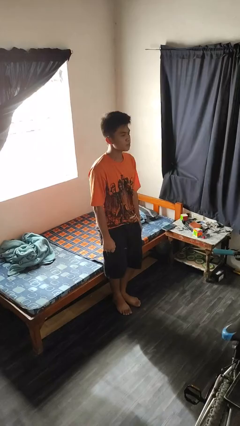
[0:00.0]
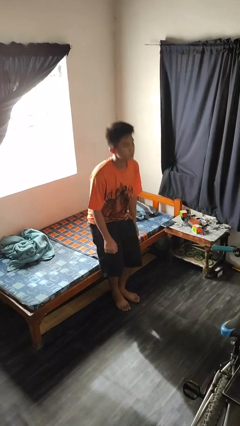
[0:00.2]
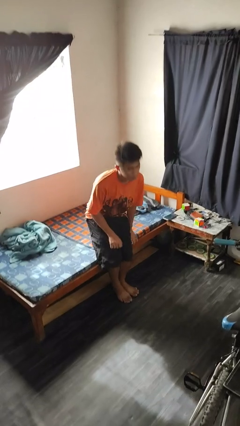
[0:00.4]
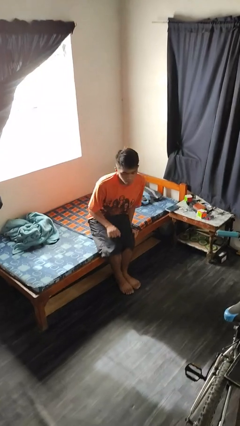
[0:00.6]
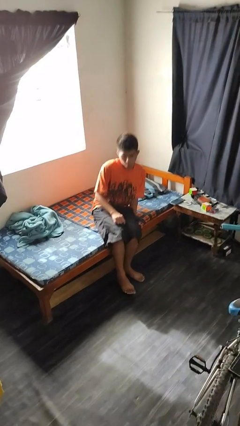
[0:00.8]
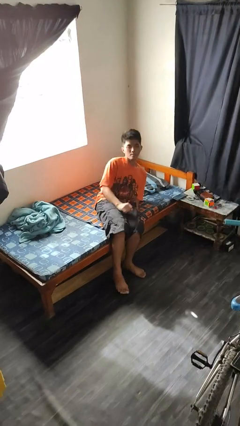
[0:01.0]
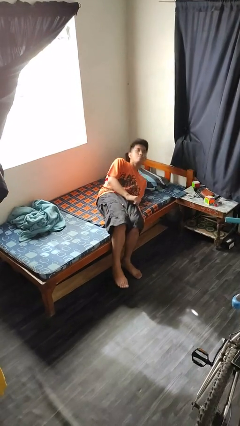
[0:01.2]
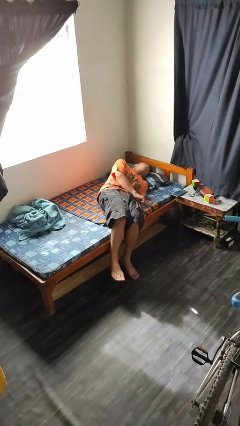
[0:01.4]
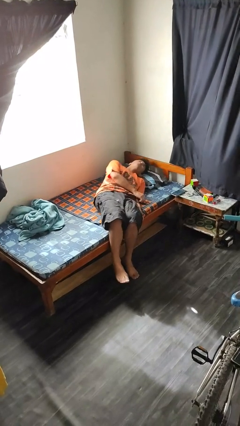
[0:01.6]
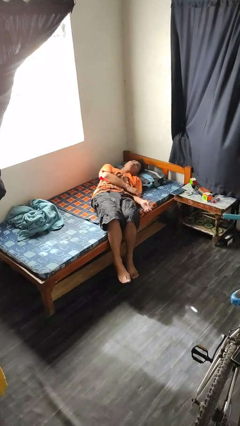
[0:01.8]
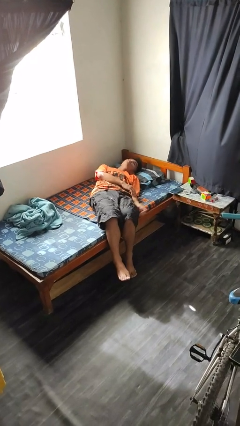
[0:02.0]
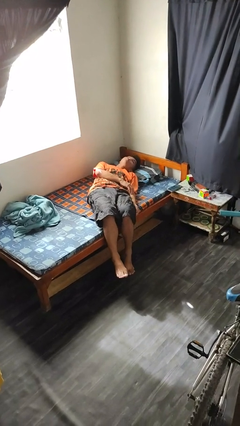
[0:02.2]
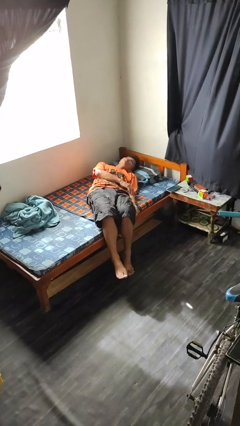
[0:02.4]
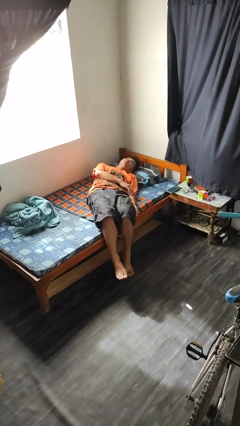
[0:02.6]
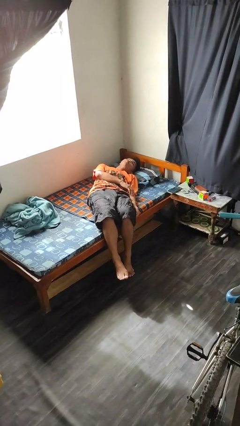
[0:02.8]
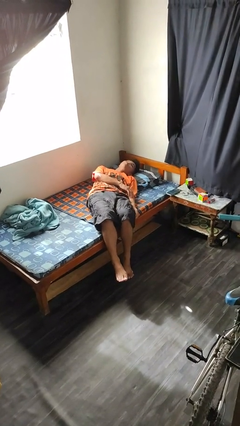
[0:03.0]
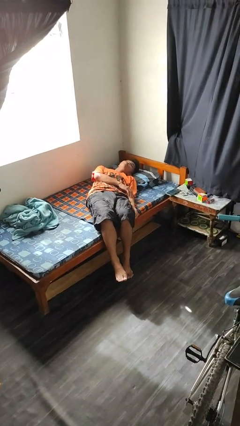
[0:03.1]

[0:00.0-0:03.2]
person lies down on bed

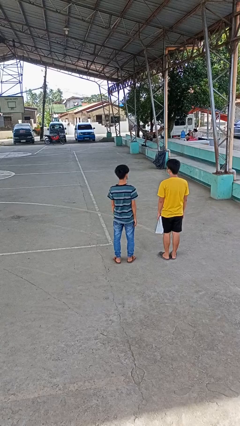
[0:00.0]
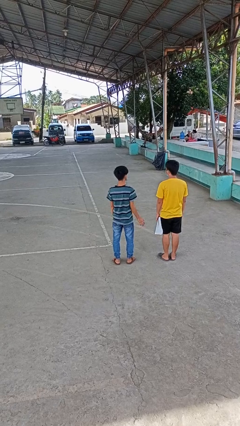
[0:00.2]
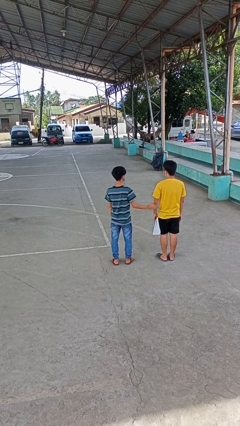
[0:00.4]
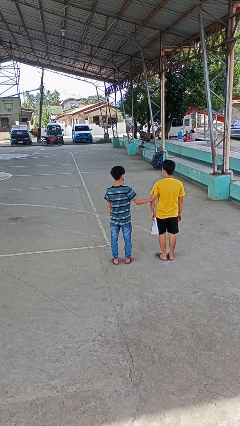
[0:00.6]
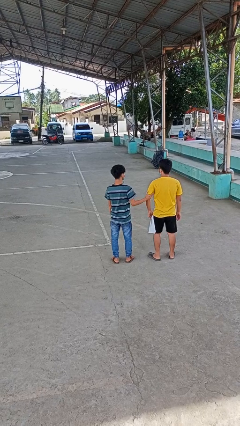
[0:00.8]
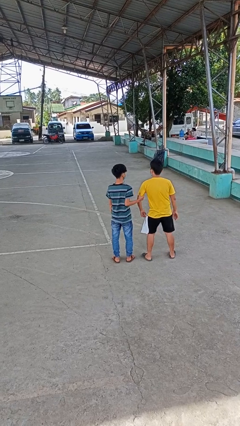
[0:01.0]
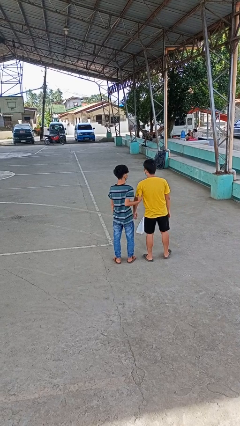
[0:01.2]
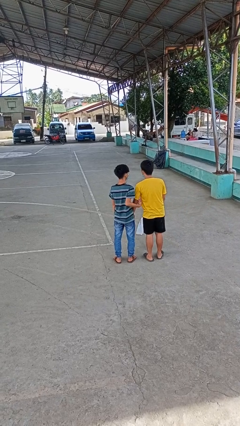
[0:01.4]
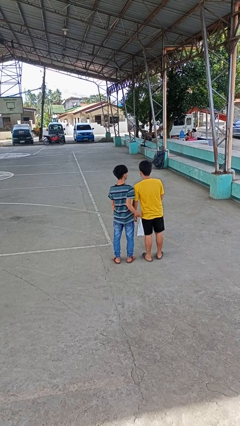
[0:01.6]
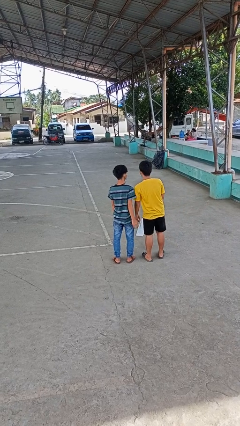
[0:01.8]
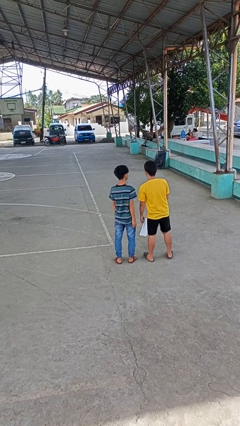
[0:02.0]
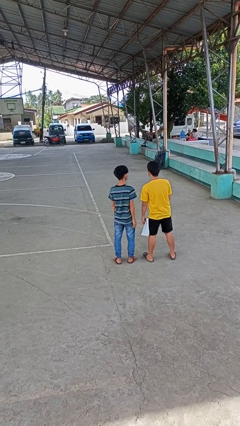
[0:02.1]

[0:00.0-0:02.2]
person grabs person by bicep

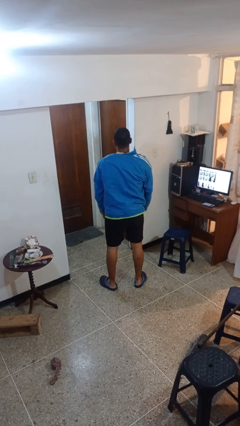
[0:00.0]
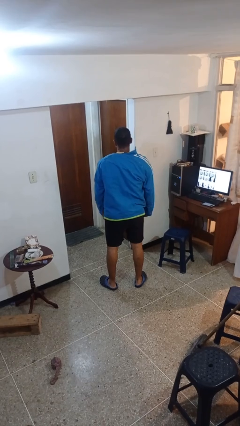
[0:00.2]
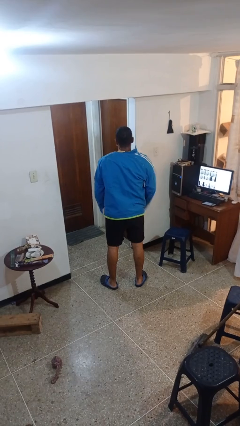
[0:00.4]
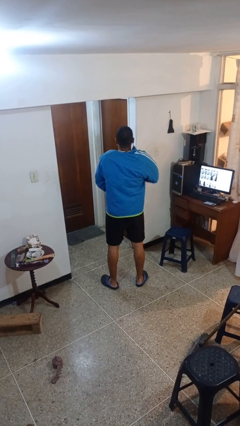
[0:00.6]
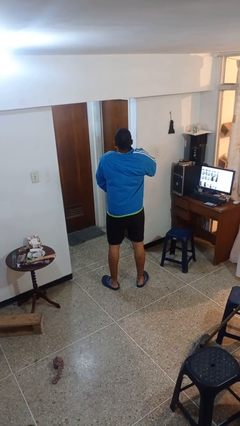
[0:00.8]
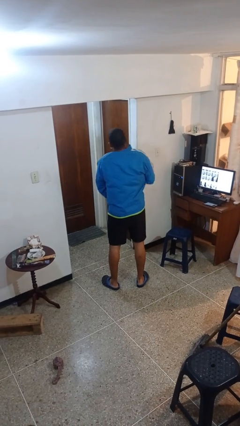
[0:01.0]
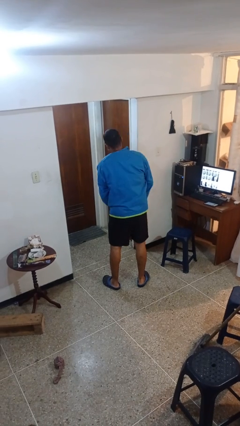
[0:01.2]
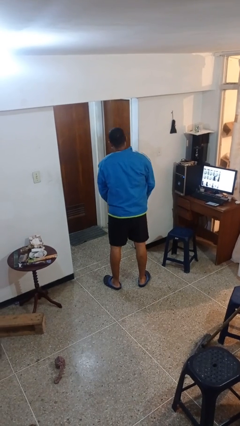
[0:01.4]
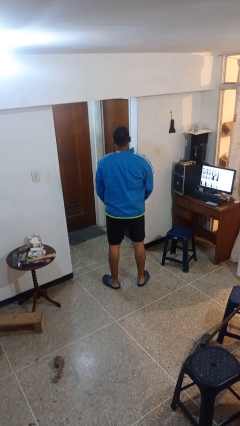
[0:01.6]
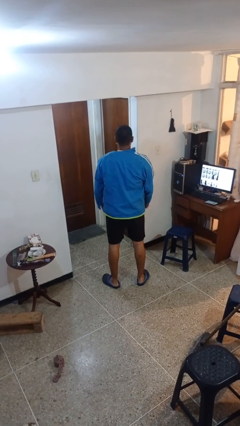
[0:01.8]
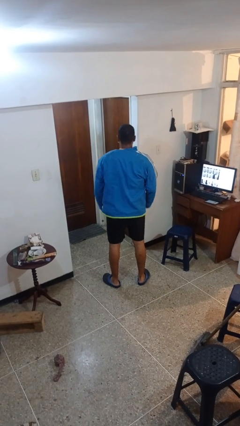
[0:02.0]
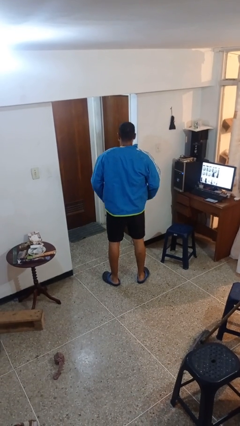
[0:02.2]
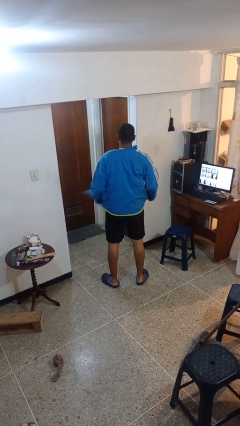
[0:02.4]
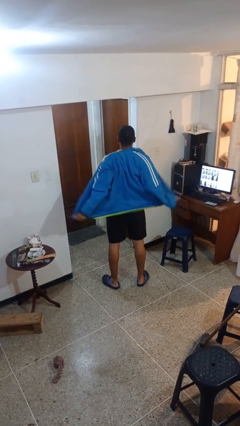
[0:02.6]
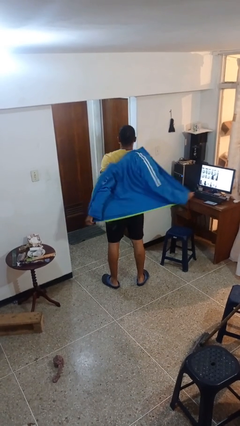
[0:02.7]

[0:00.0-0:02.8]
person unzips jacket

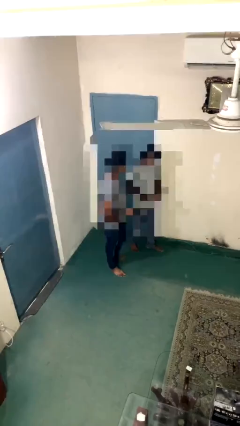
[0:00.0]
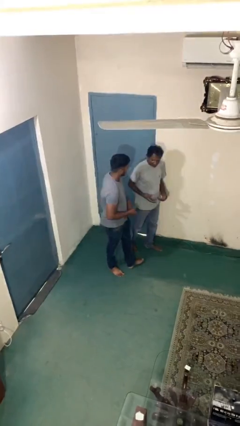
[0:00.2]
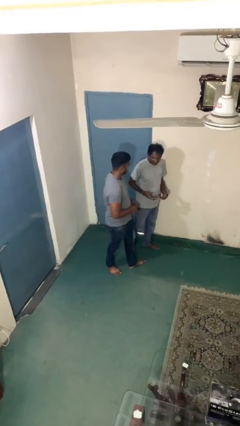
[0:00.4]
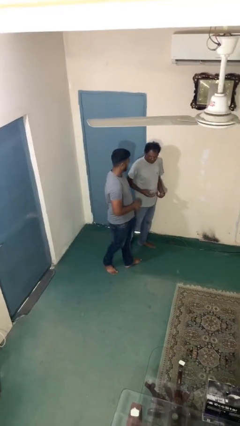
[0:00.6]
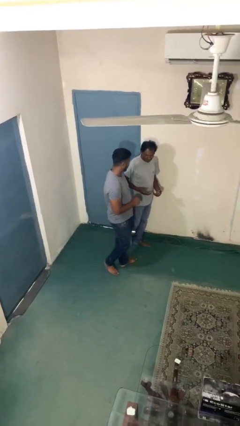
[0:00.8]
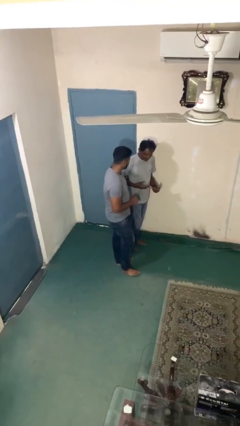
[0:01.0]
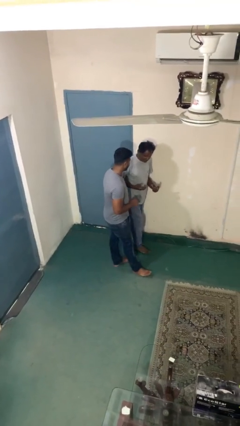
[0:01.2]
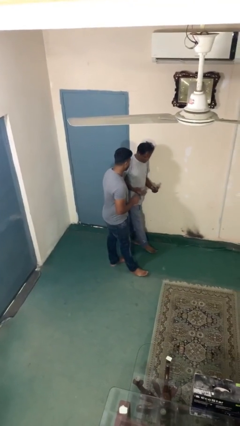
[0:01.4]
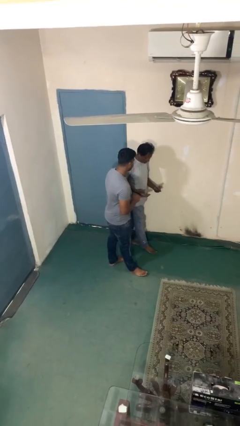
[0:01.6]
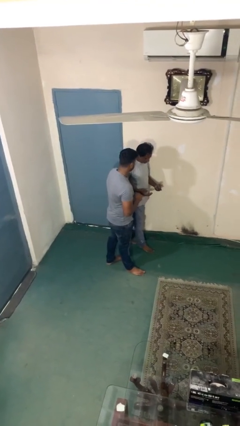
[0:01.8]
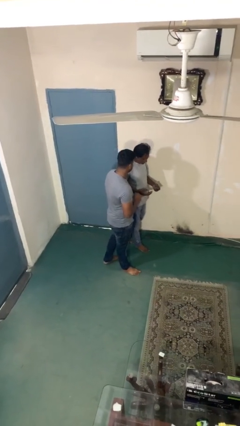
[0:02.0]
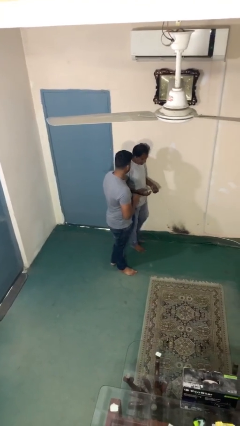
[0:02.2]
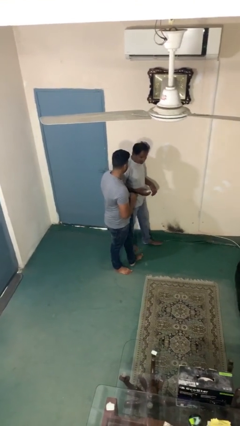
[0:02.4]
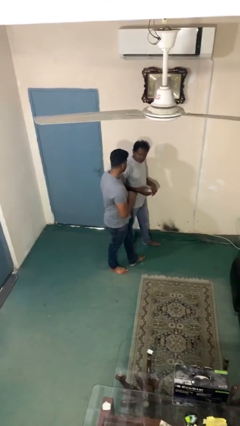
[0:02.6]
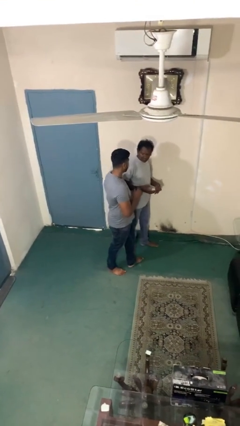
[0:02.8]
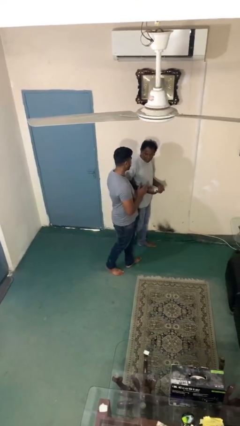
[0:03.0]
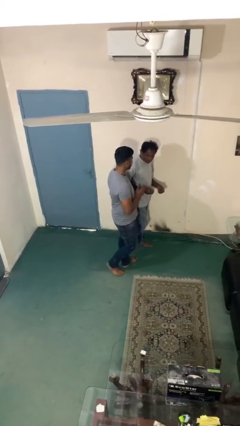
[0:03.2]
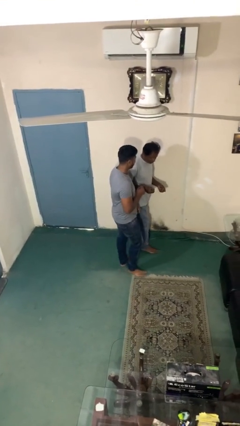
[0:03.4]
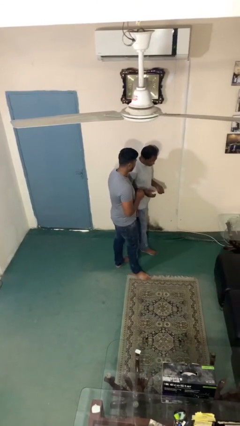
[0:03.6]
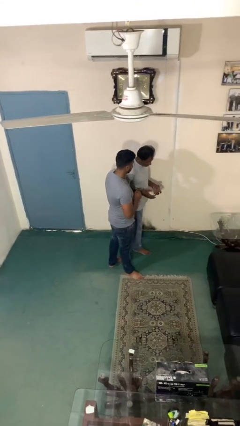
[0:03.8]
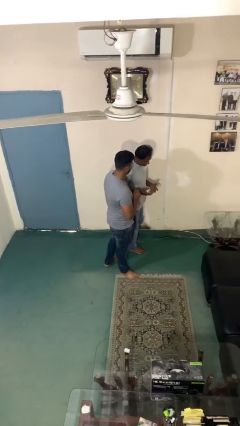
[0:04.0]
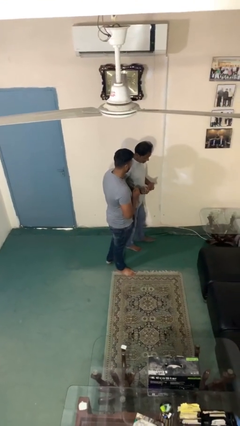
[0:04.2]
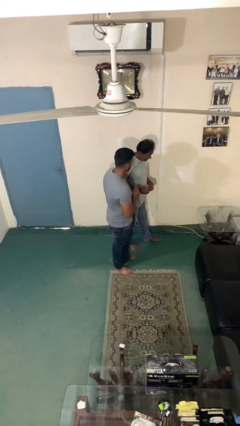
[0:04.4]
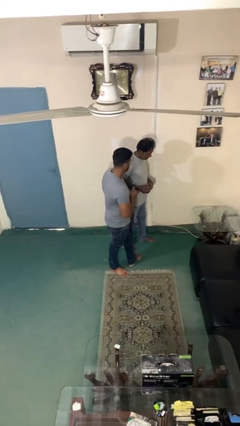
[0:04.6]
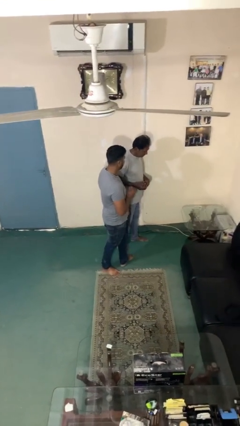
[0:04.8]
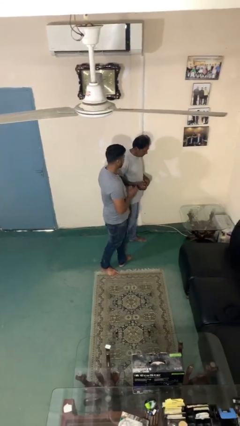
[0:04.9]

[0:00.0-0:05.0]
person talks to person

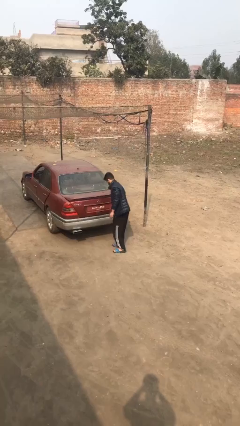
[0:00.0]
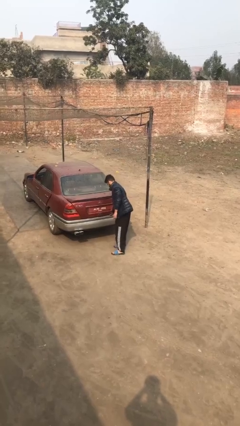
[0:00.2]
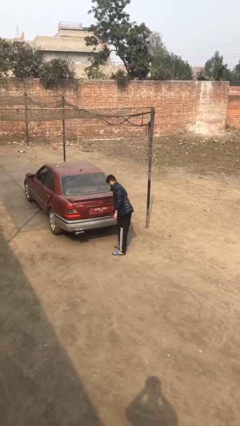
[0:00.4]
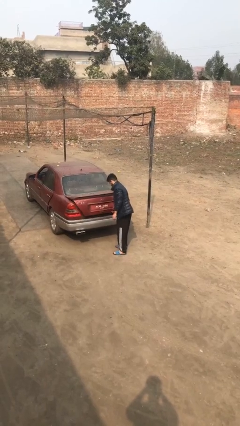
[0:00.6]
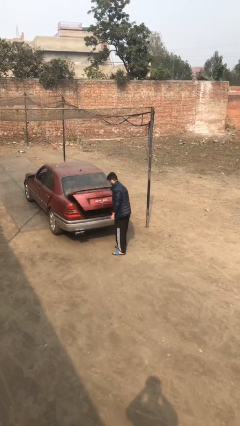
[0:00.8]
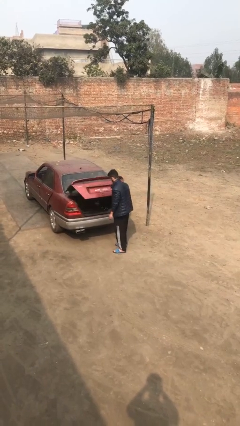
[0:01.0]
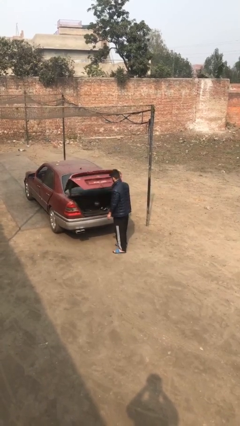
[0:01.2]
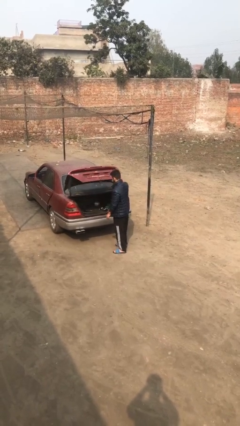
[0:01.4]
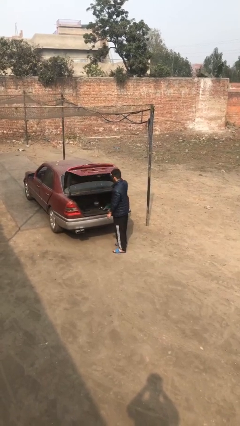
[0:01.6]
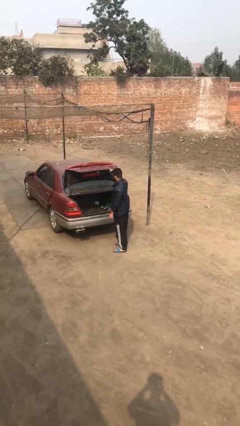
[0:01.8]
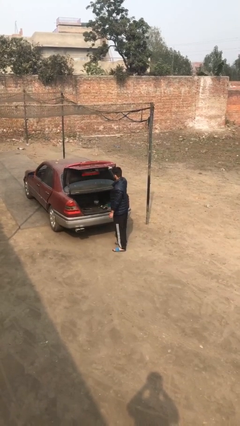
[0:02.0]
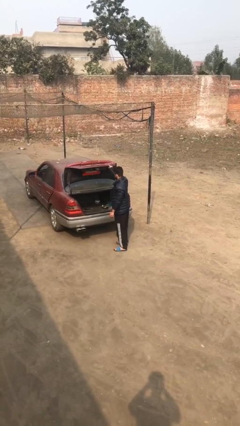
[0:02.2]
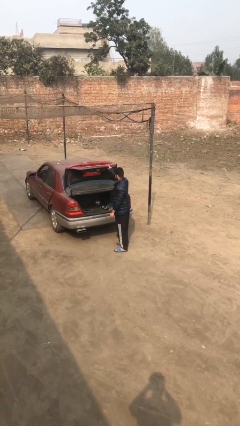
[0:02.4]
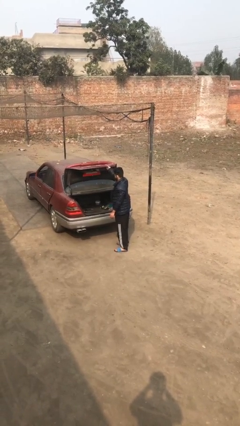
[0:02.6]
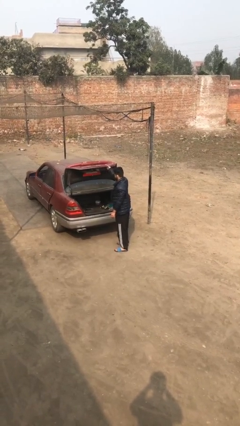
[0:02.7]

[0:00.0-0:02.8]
person opens car trunk

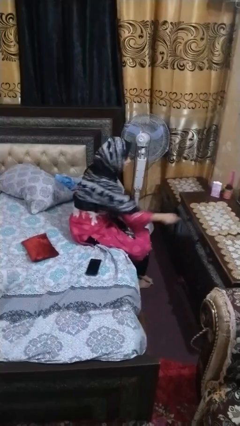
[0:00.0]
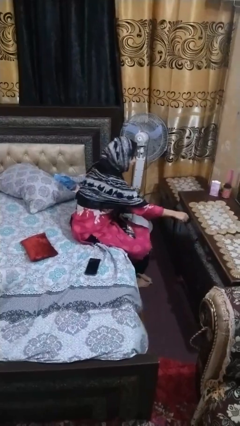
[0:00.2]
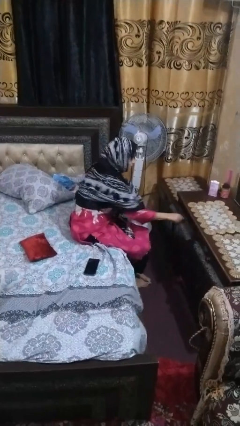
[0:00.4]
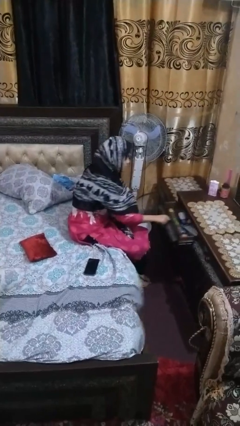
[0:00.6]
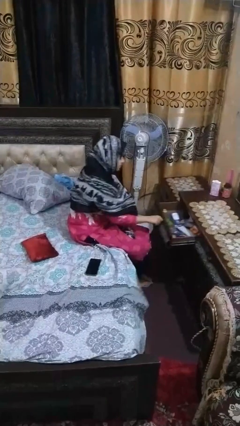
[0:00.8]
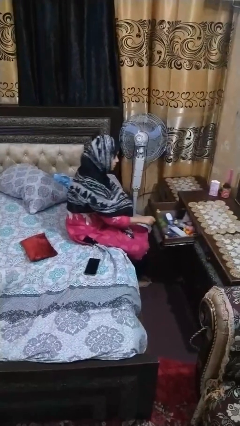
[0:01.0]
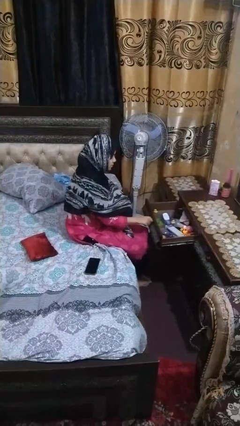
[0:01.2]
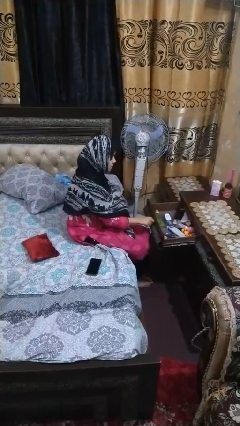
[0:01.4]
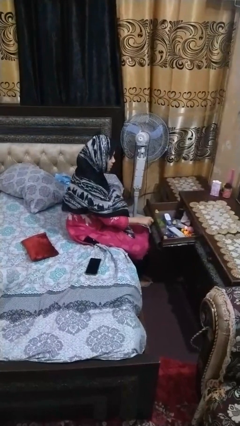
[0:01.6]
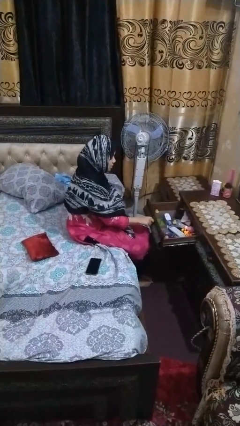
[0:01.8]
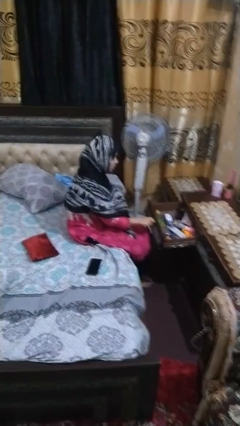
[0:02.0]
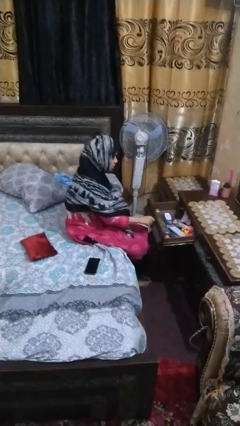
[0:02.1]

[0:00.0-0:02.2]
person opens dresser drawer
